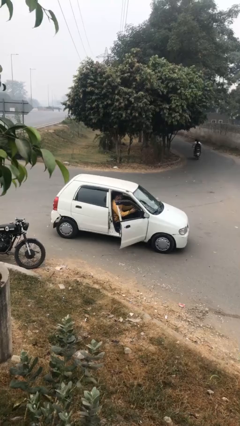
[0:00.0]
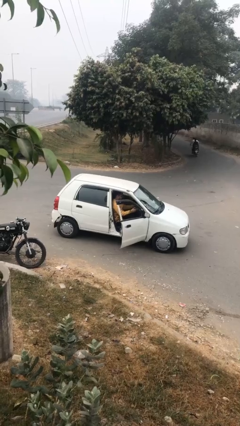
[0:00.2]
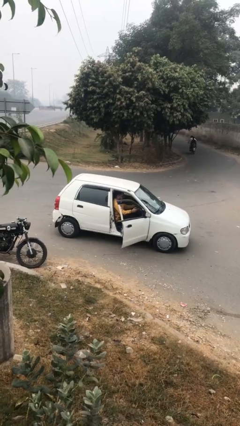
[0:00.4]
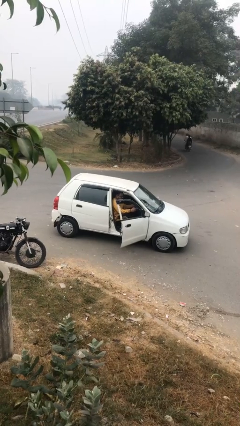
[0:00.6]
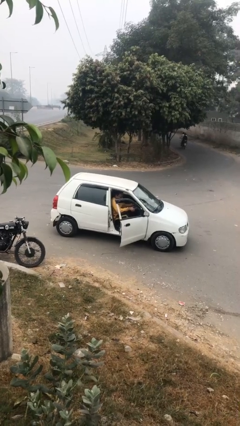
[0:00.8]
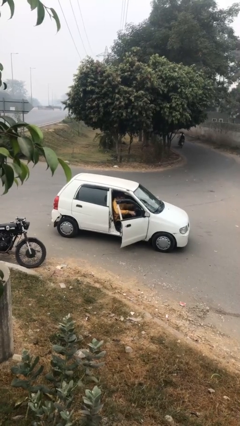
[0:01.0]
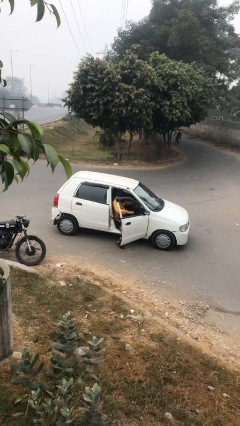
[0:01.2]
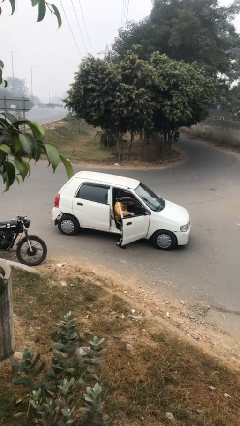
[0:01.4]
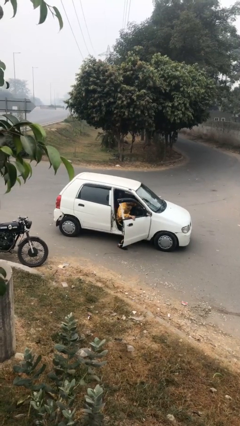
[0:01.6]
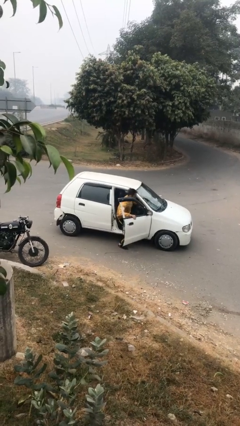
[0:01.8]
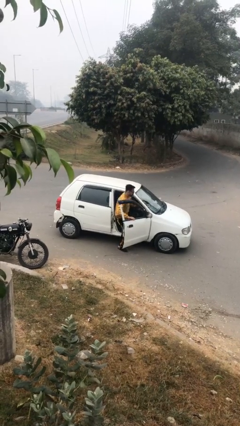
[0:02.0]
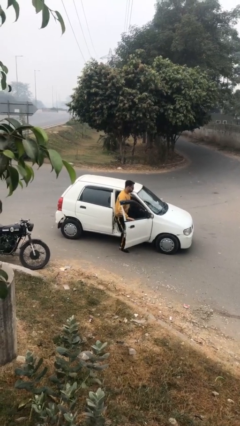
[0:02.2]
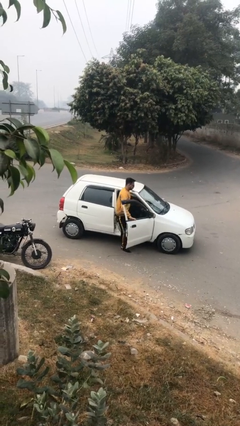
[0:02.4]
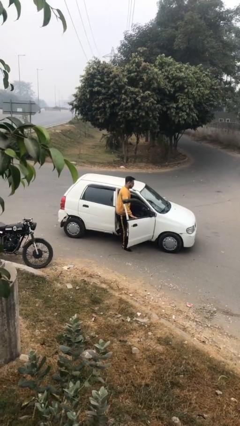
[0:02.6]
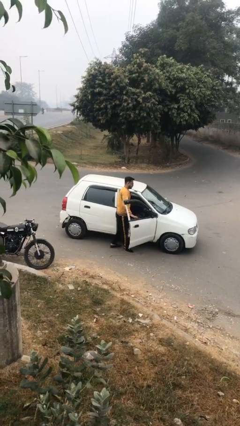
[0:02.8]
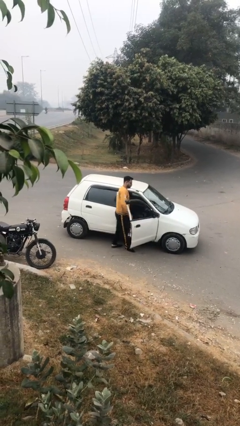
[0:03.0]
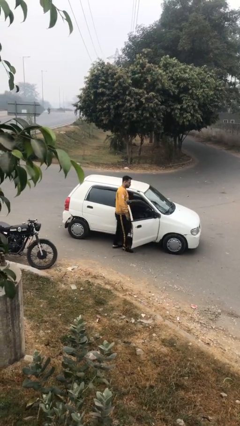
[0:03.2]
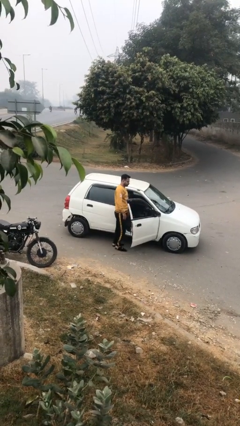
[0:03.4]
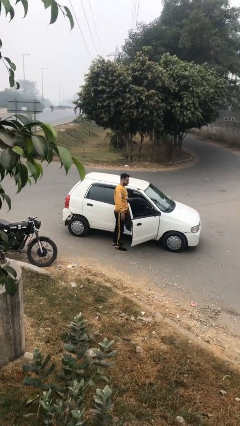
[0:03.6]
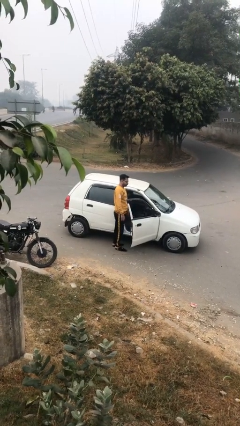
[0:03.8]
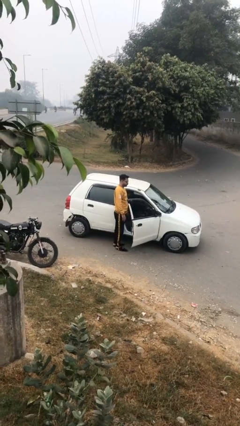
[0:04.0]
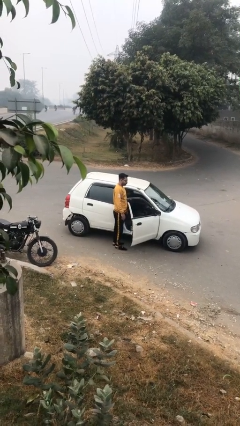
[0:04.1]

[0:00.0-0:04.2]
person exits car

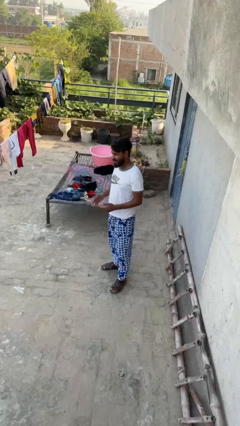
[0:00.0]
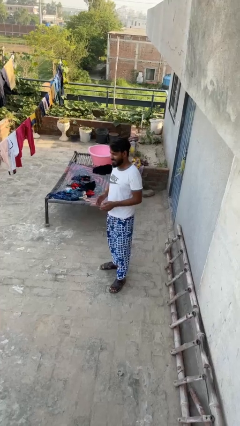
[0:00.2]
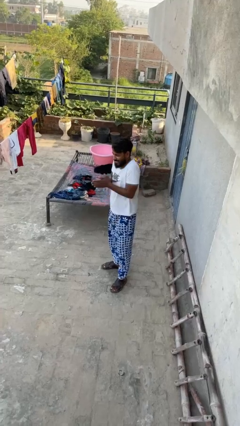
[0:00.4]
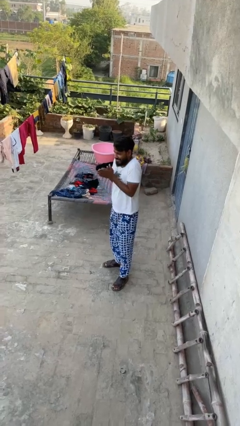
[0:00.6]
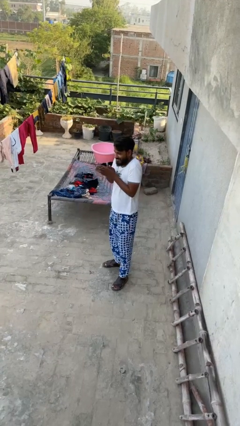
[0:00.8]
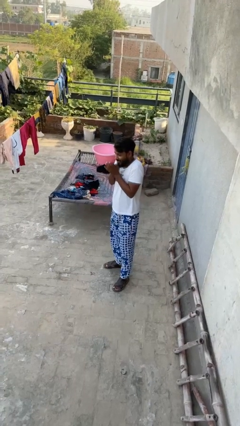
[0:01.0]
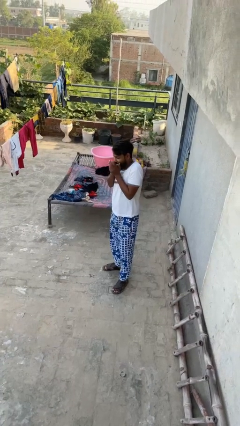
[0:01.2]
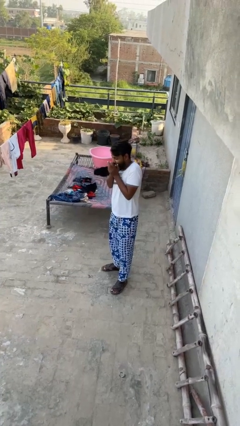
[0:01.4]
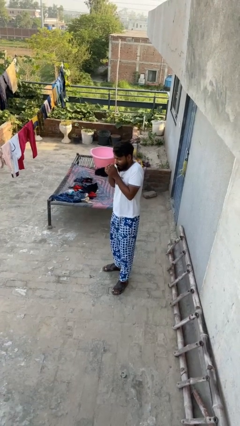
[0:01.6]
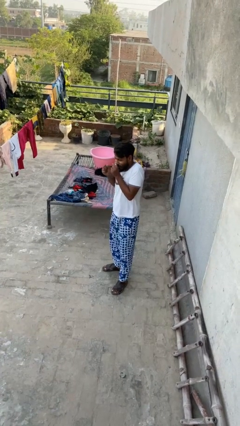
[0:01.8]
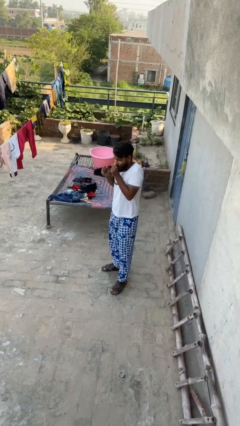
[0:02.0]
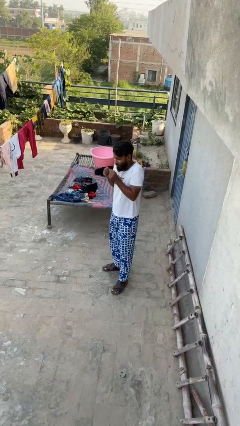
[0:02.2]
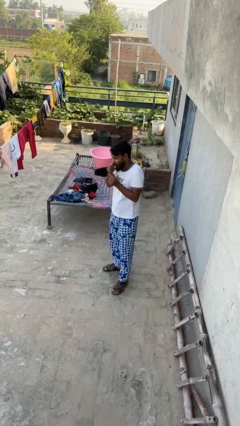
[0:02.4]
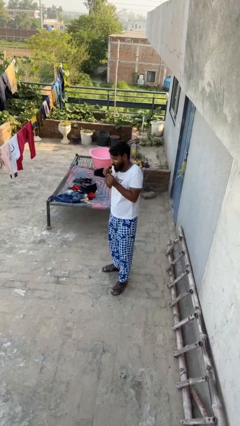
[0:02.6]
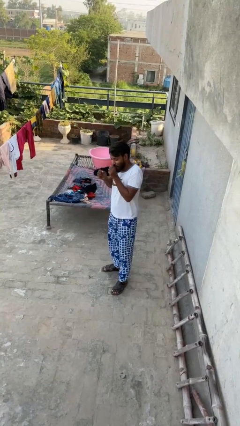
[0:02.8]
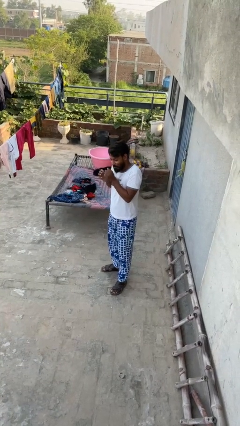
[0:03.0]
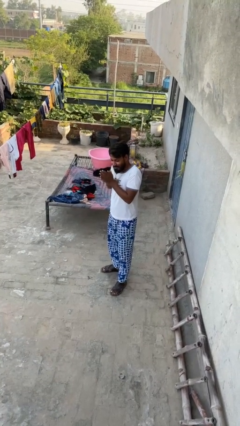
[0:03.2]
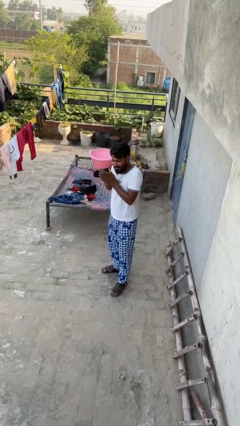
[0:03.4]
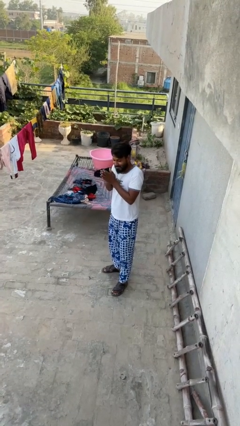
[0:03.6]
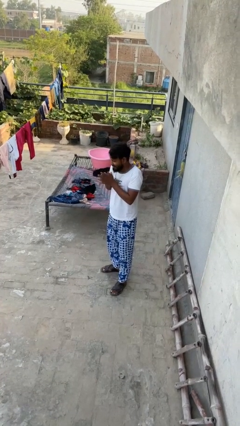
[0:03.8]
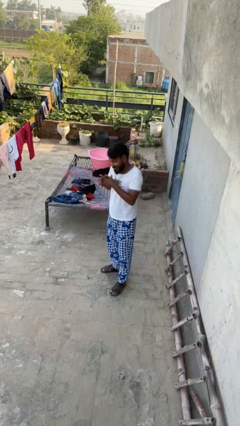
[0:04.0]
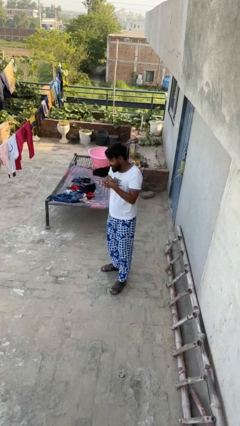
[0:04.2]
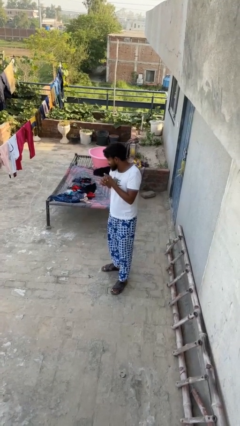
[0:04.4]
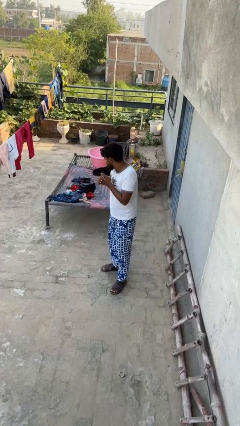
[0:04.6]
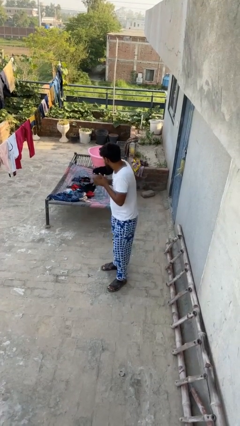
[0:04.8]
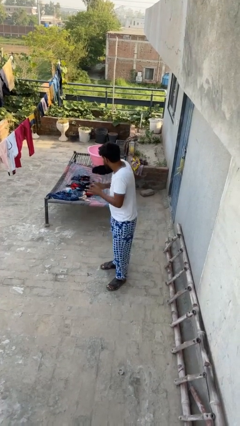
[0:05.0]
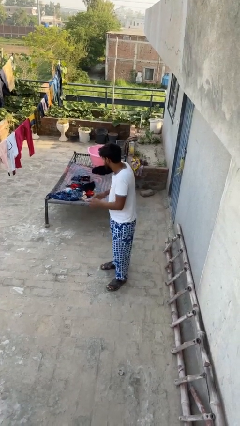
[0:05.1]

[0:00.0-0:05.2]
person blows into hands

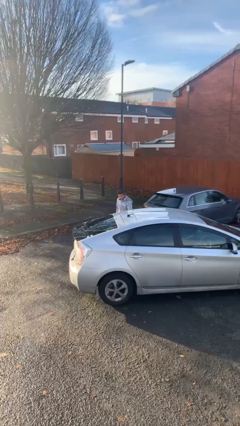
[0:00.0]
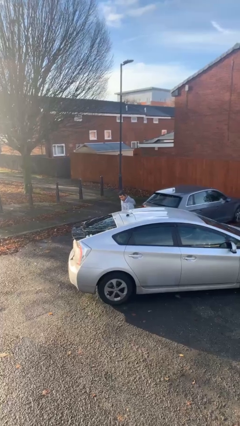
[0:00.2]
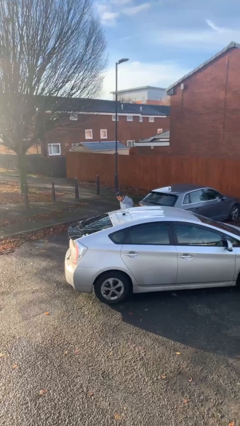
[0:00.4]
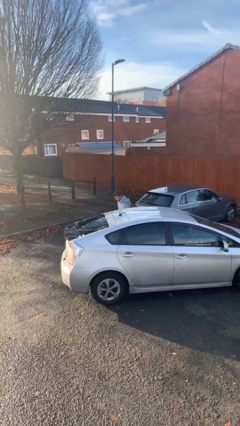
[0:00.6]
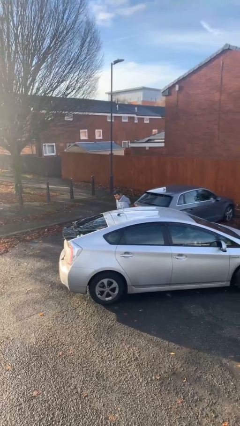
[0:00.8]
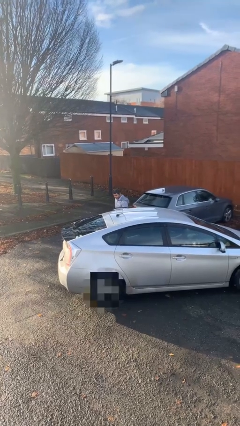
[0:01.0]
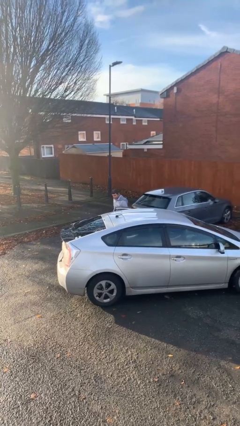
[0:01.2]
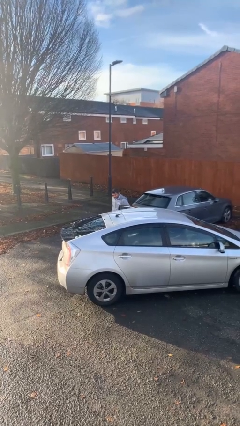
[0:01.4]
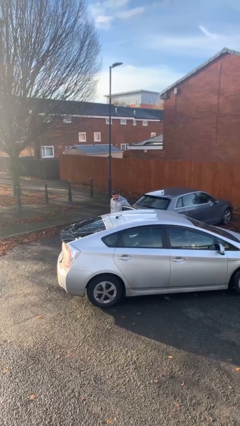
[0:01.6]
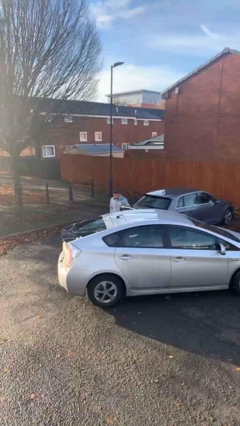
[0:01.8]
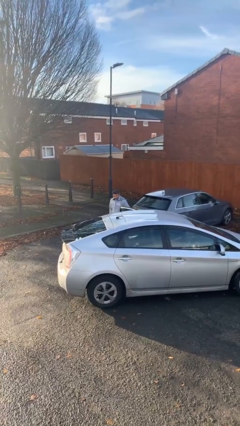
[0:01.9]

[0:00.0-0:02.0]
person opens car door

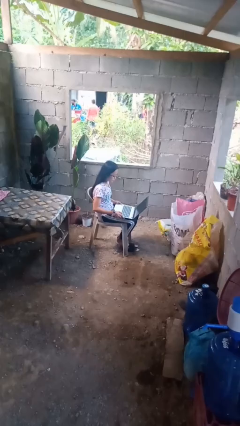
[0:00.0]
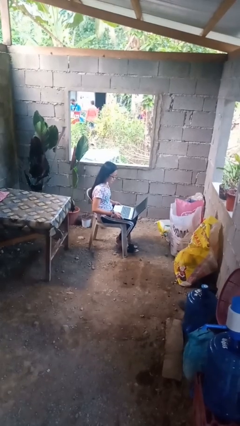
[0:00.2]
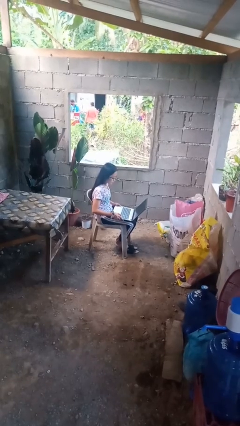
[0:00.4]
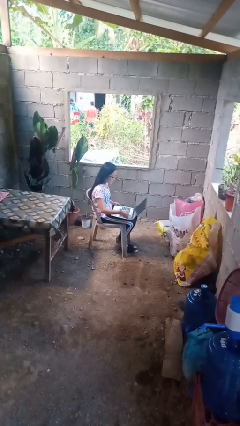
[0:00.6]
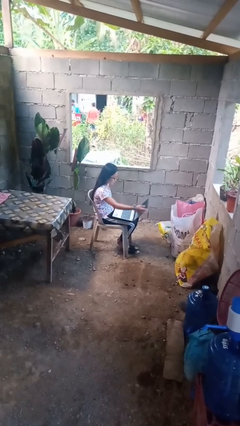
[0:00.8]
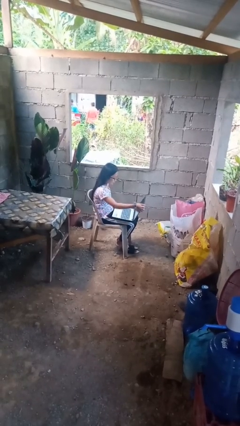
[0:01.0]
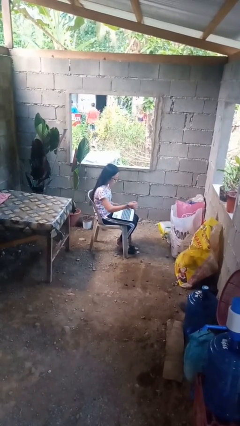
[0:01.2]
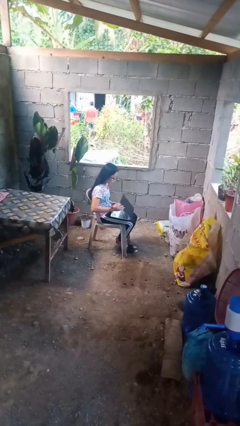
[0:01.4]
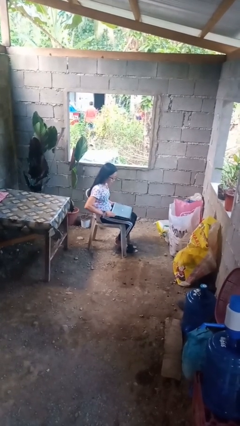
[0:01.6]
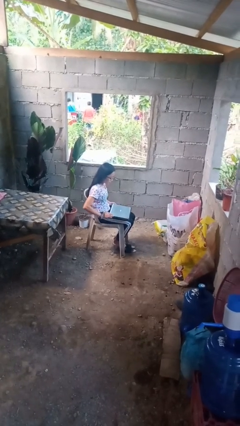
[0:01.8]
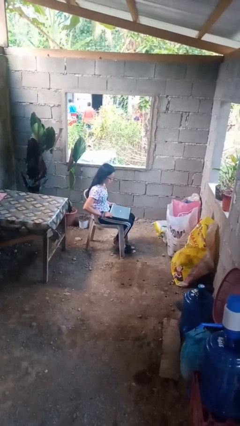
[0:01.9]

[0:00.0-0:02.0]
person closes laptop

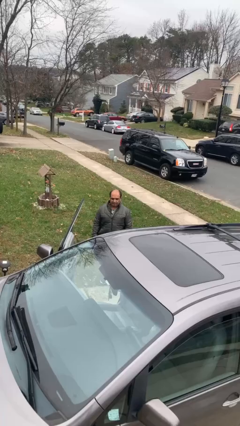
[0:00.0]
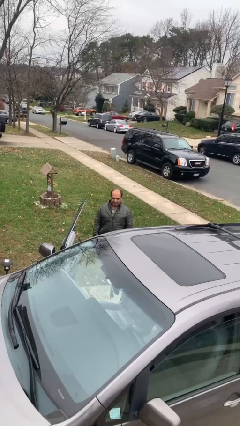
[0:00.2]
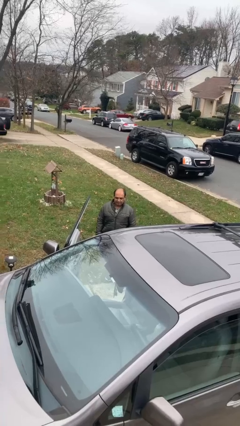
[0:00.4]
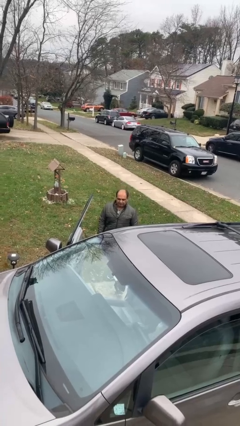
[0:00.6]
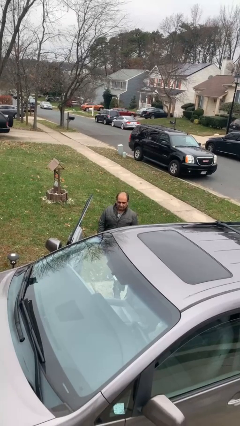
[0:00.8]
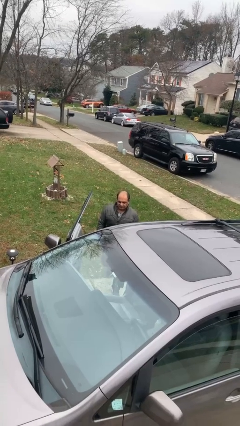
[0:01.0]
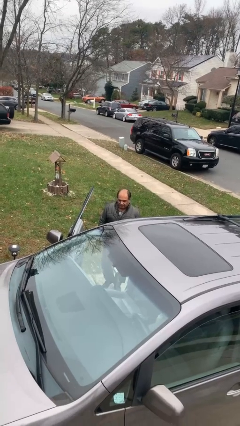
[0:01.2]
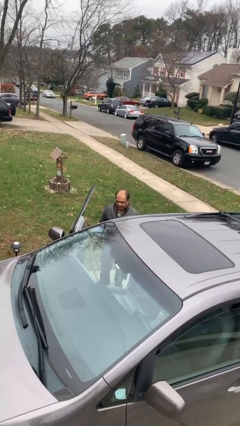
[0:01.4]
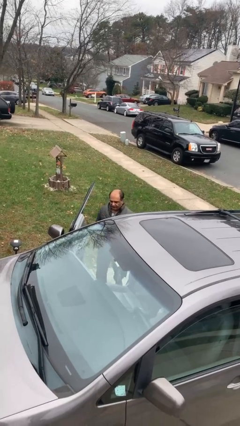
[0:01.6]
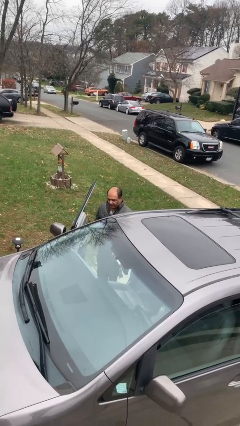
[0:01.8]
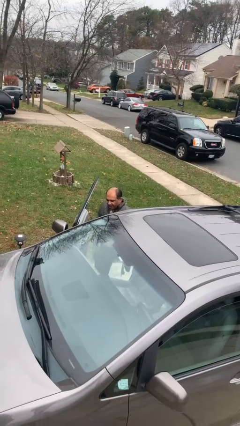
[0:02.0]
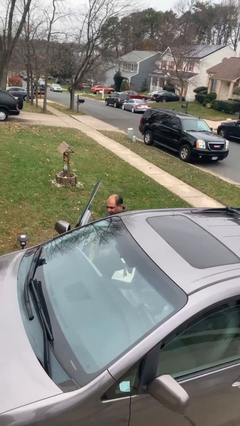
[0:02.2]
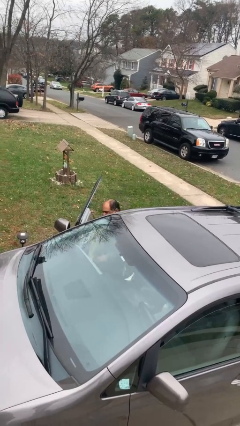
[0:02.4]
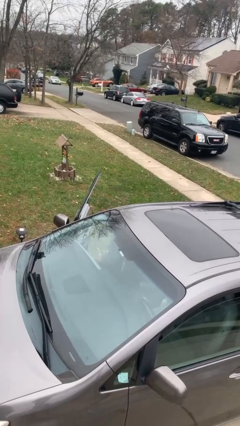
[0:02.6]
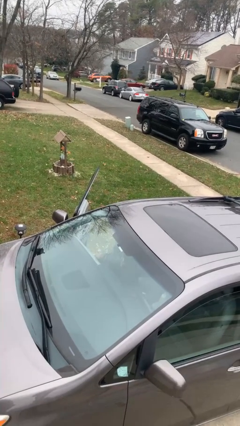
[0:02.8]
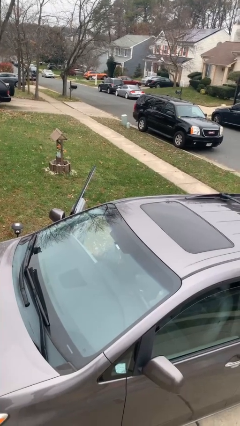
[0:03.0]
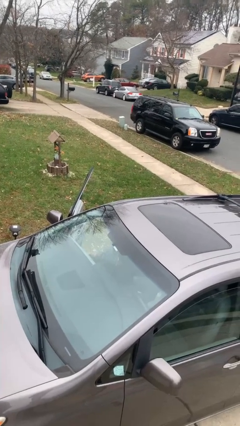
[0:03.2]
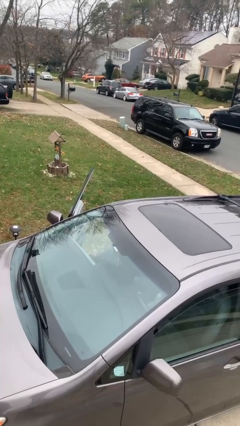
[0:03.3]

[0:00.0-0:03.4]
person enters car

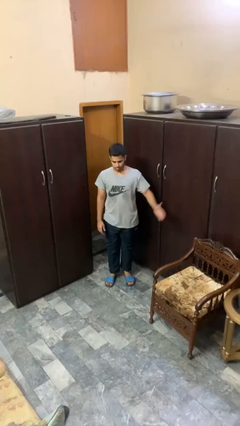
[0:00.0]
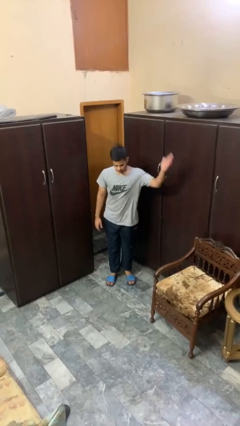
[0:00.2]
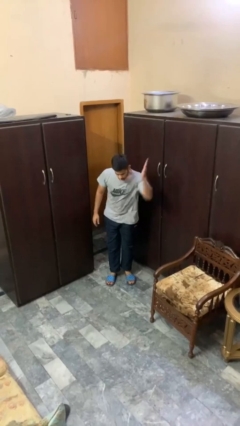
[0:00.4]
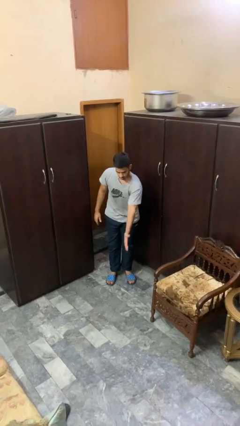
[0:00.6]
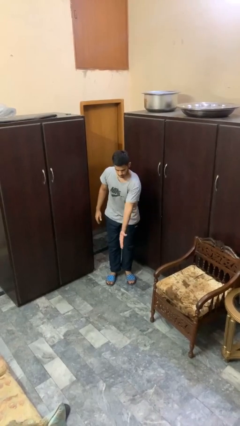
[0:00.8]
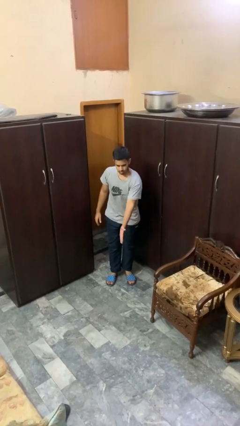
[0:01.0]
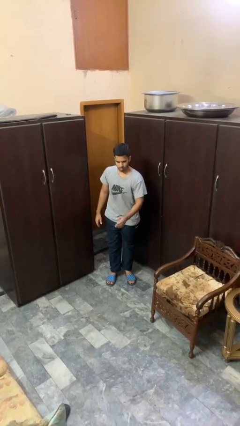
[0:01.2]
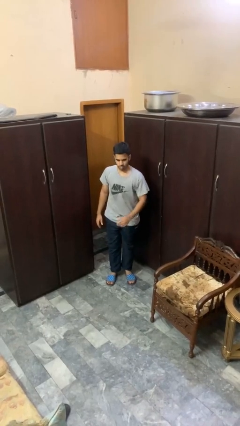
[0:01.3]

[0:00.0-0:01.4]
person karate chop
